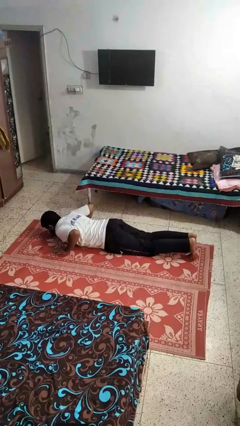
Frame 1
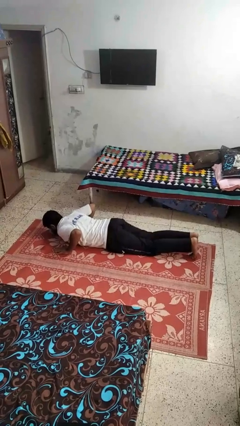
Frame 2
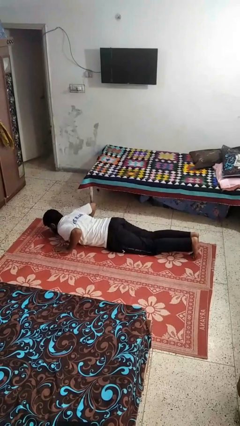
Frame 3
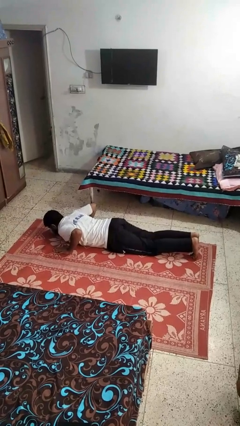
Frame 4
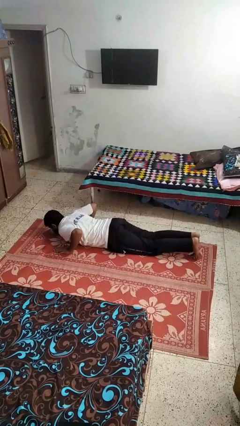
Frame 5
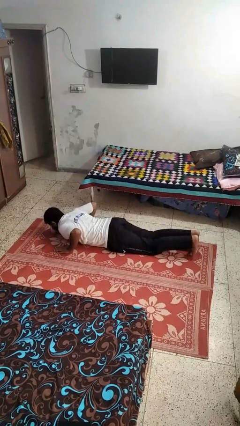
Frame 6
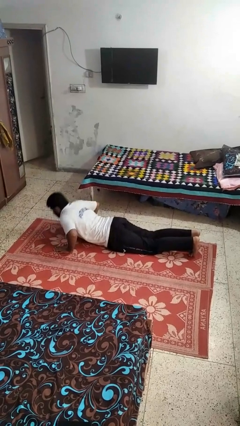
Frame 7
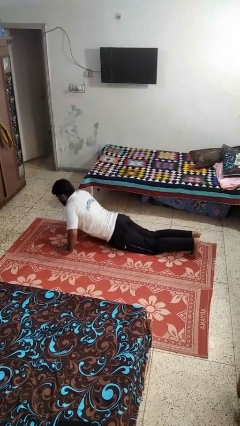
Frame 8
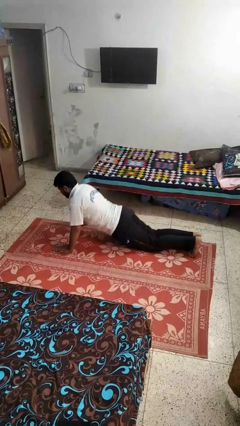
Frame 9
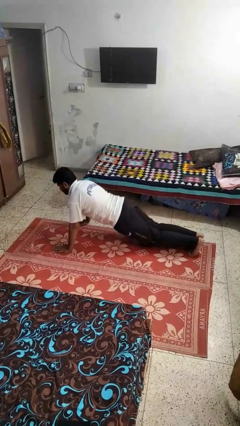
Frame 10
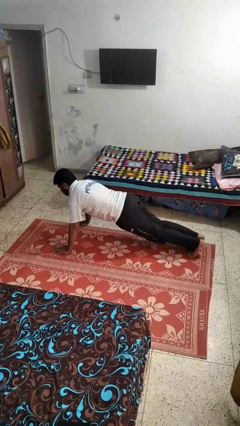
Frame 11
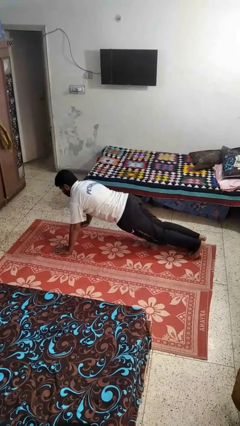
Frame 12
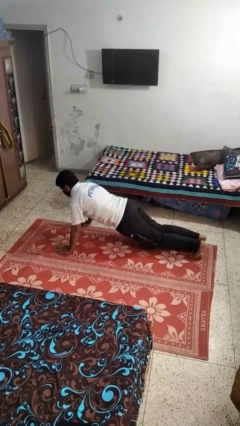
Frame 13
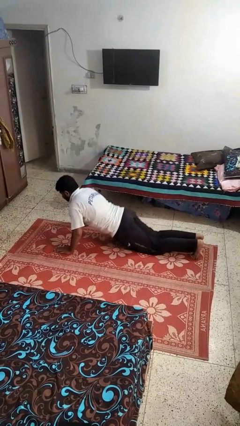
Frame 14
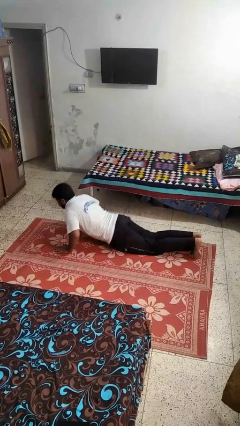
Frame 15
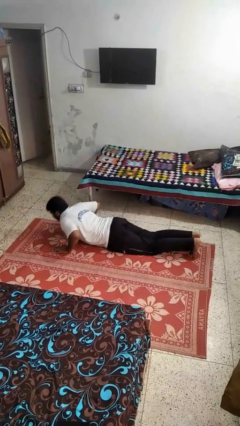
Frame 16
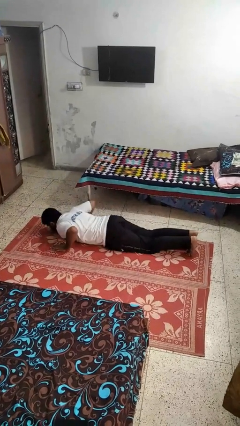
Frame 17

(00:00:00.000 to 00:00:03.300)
person exercises with pushup

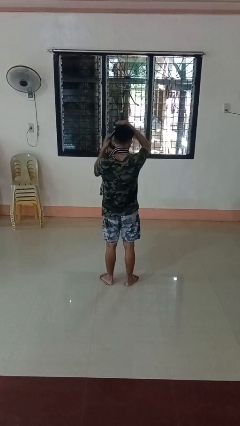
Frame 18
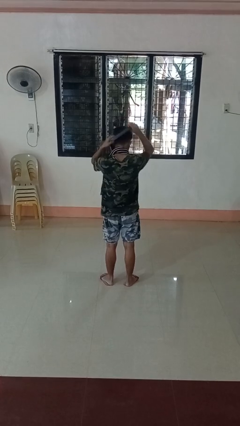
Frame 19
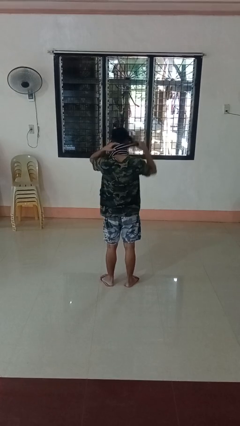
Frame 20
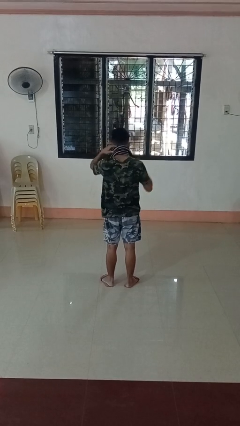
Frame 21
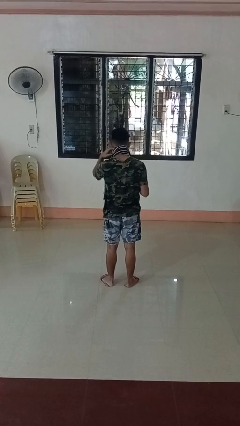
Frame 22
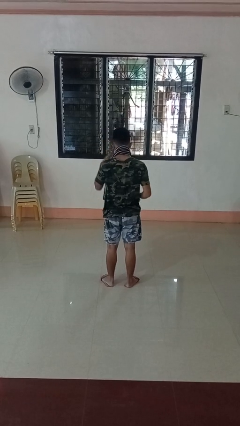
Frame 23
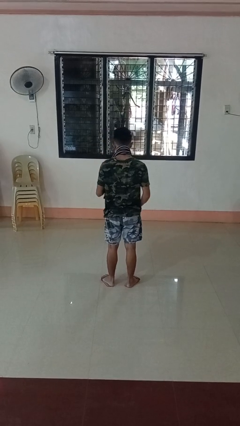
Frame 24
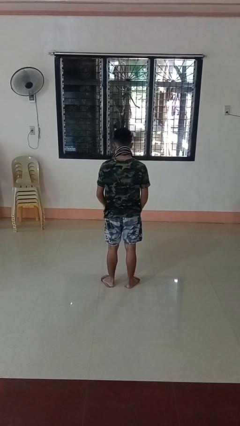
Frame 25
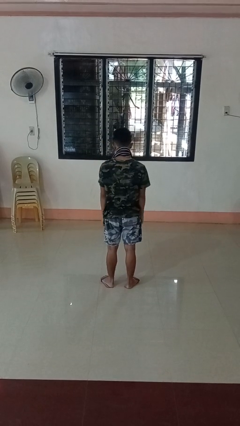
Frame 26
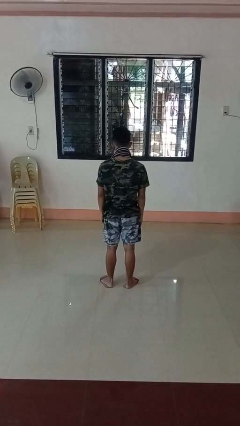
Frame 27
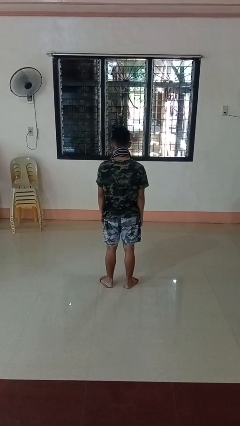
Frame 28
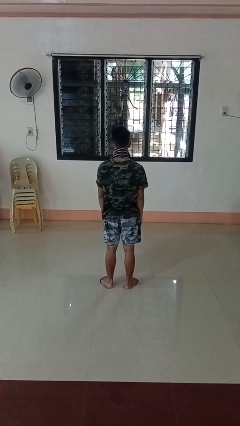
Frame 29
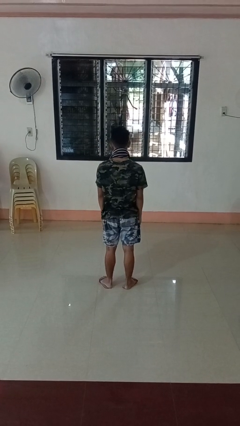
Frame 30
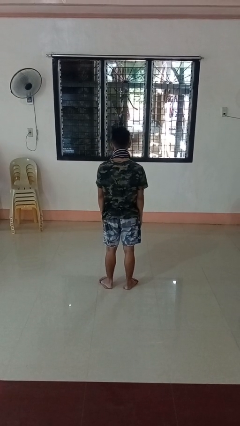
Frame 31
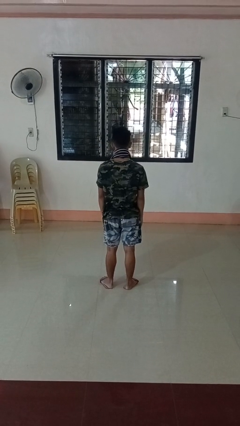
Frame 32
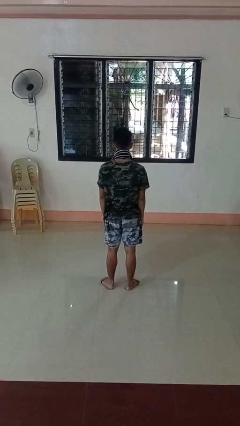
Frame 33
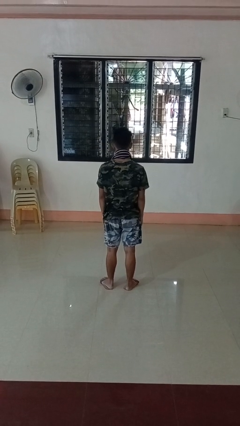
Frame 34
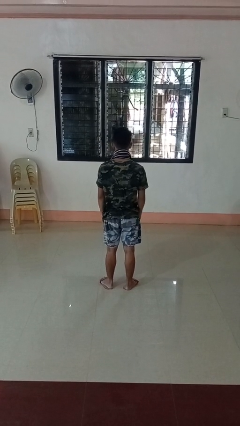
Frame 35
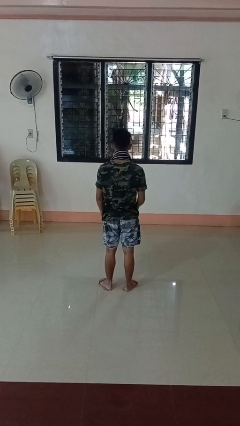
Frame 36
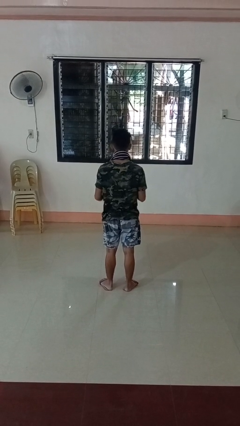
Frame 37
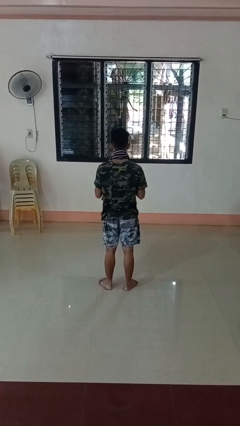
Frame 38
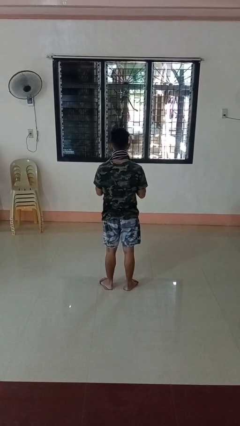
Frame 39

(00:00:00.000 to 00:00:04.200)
person puts on scarf

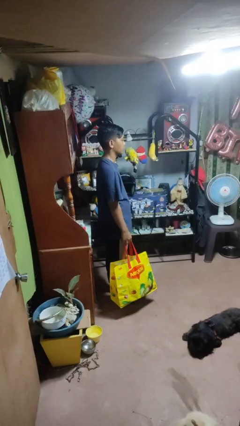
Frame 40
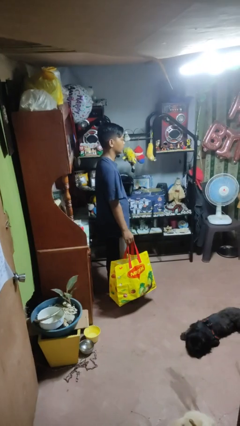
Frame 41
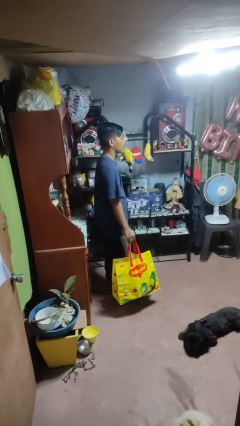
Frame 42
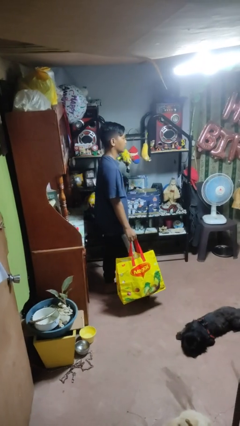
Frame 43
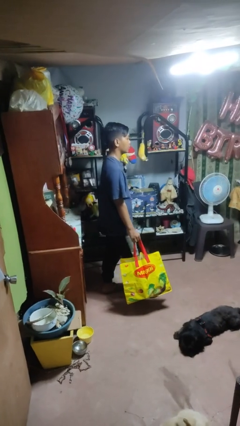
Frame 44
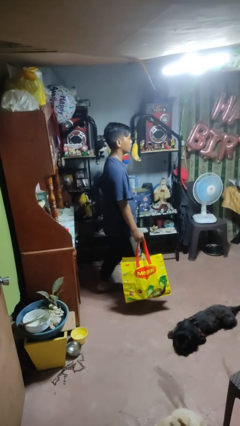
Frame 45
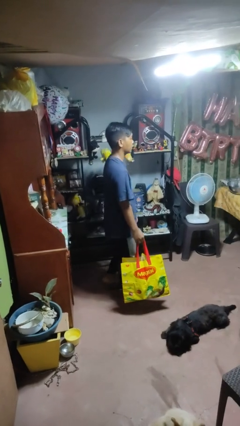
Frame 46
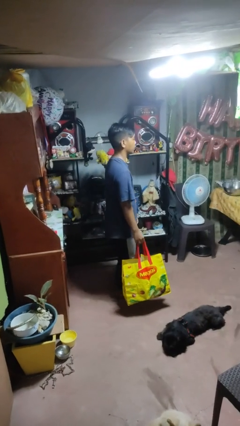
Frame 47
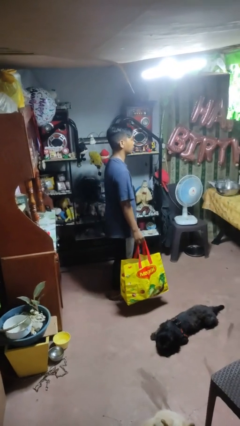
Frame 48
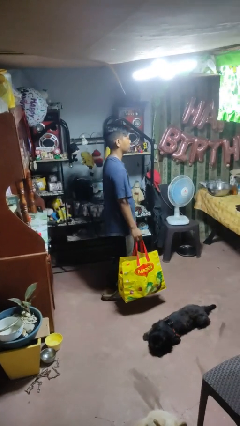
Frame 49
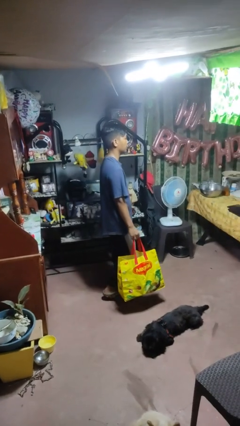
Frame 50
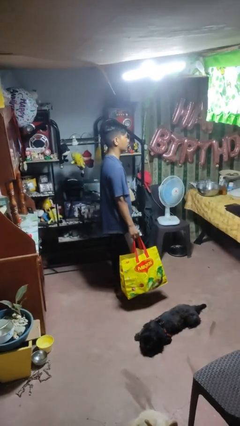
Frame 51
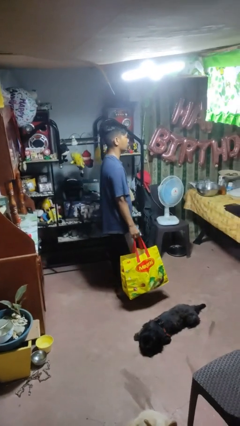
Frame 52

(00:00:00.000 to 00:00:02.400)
person carries groceries

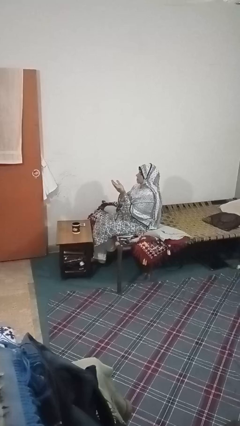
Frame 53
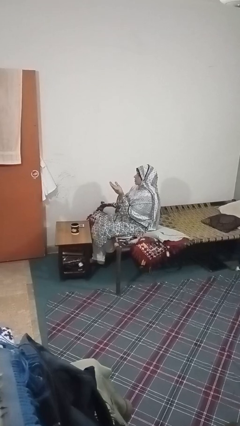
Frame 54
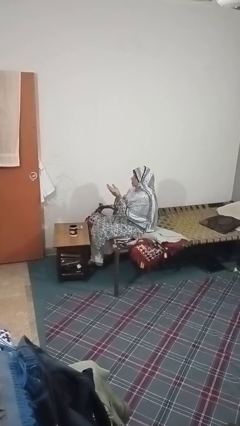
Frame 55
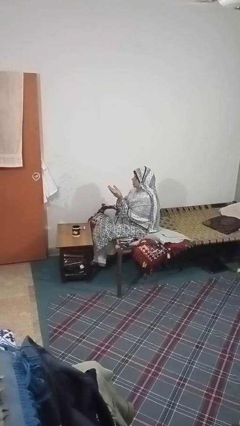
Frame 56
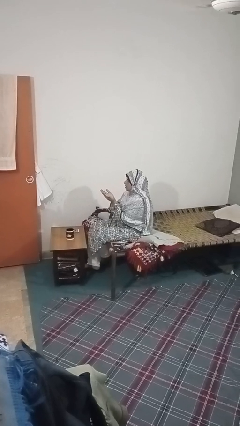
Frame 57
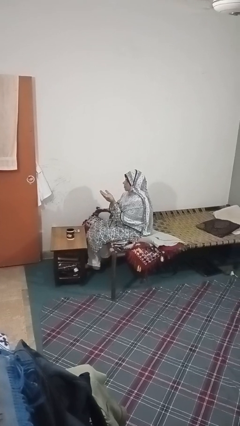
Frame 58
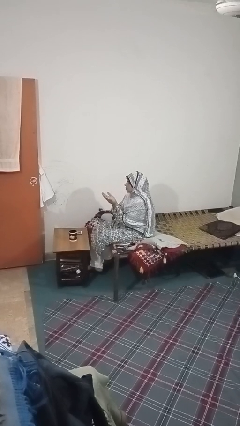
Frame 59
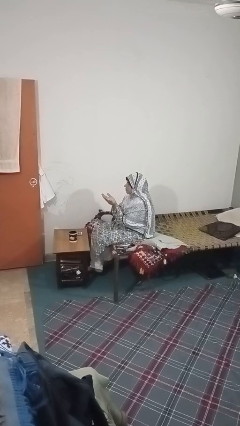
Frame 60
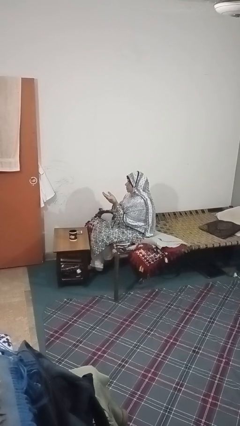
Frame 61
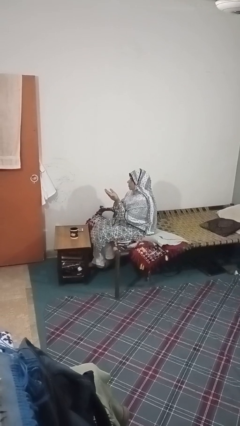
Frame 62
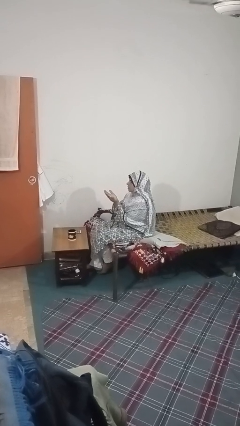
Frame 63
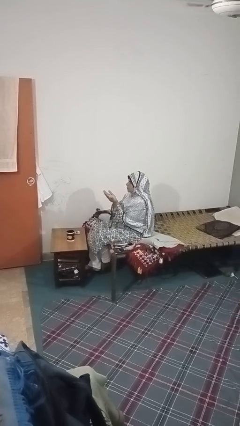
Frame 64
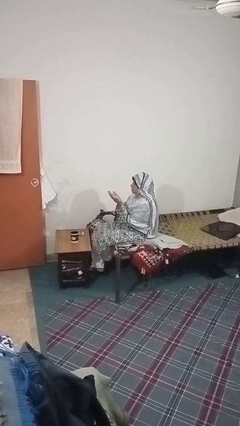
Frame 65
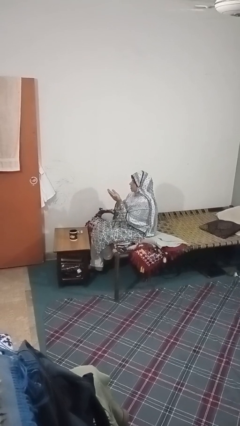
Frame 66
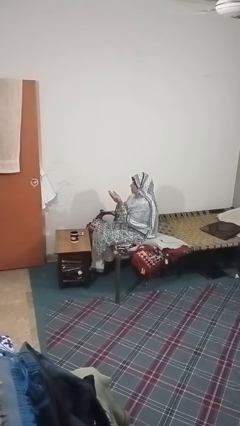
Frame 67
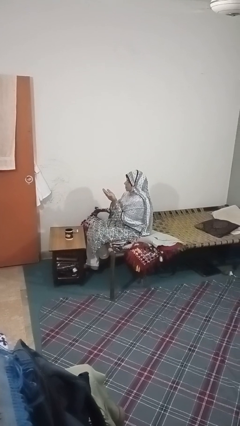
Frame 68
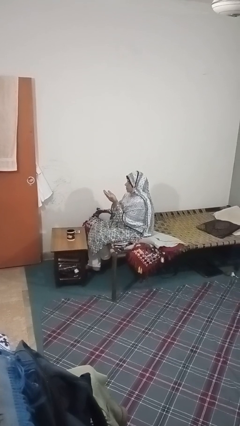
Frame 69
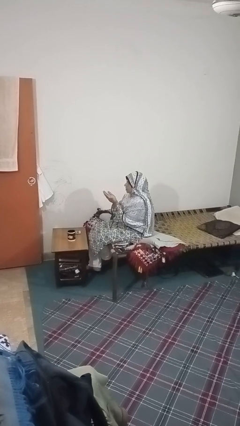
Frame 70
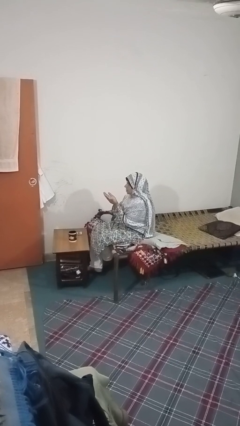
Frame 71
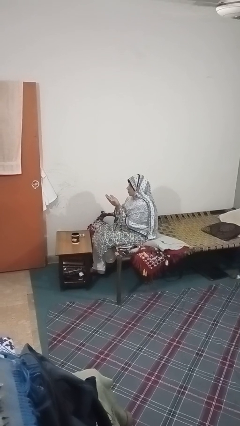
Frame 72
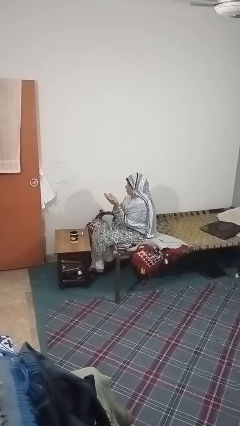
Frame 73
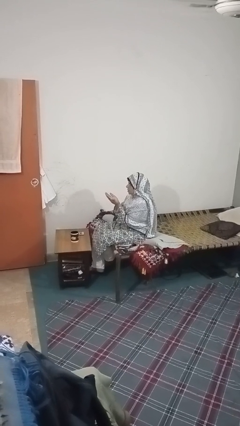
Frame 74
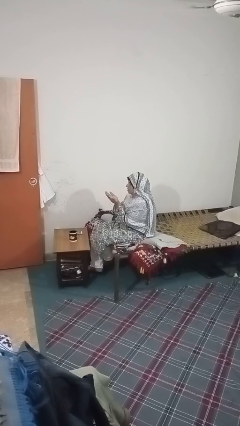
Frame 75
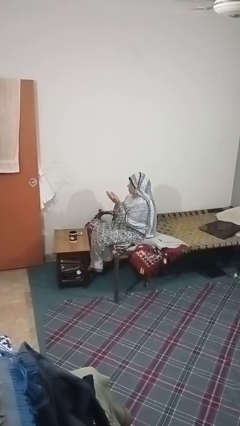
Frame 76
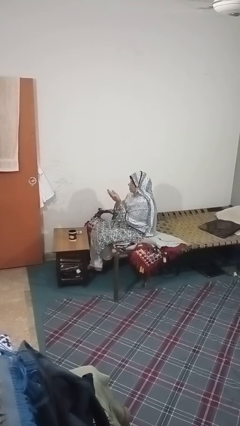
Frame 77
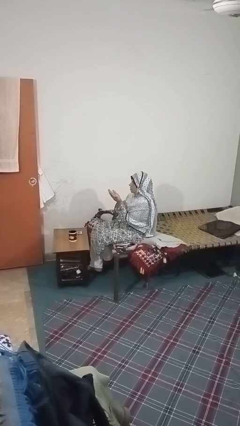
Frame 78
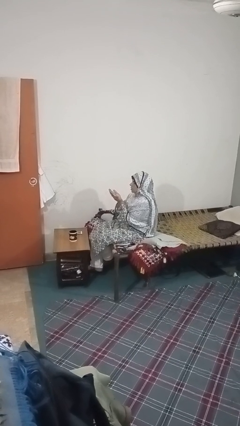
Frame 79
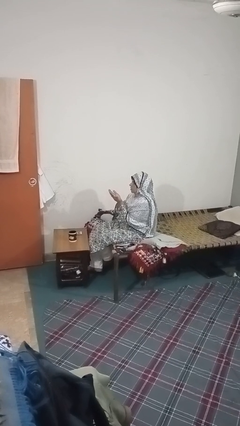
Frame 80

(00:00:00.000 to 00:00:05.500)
person prays

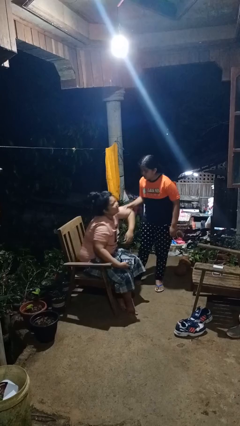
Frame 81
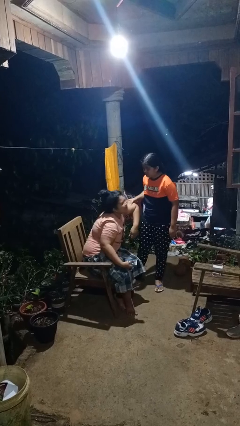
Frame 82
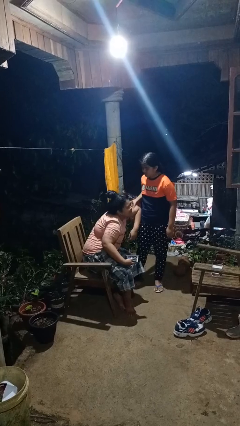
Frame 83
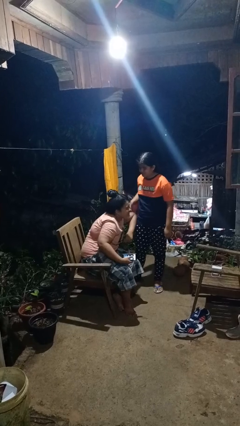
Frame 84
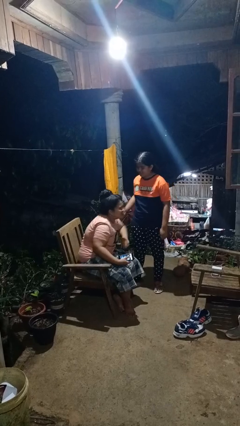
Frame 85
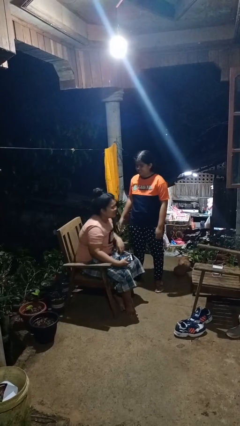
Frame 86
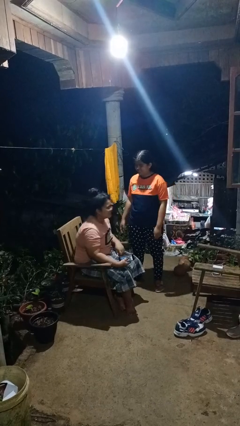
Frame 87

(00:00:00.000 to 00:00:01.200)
person grabs person by bicep

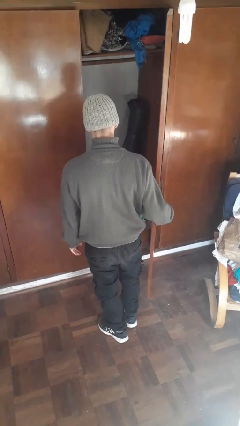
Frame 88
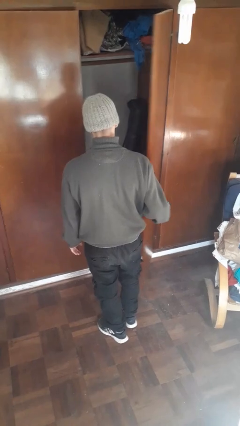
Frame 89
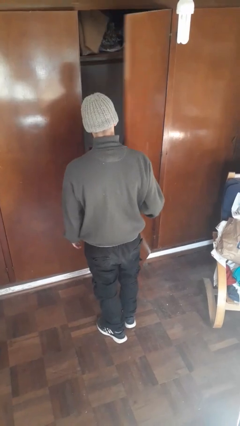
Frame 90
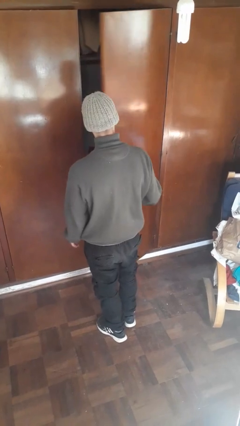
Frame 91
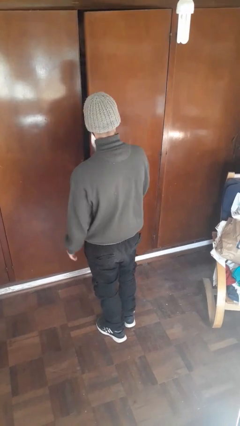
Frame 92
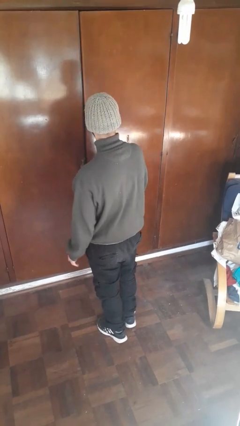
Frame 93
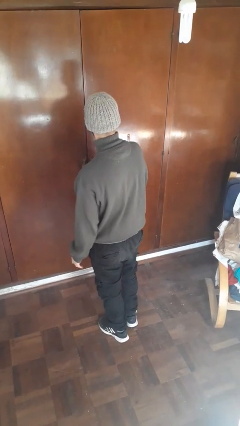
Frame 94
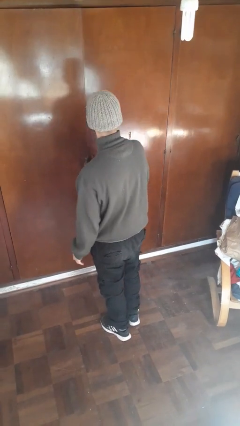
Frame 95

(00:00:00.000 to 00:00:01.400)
person closes closet door
